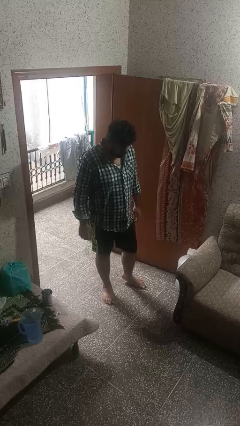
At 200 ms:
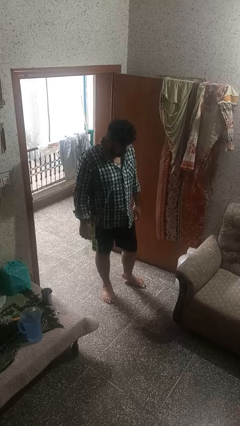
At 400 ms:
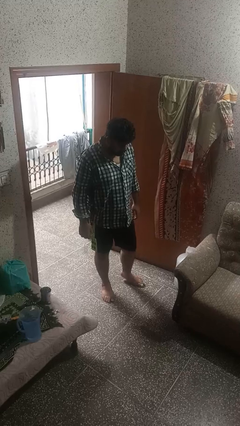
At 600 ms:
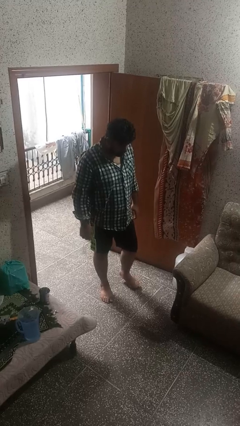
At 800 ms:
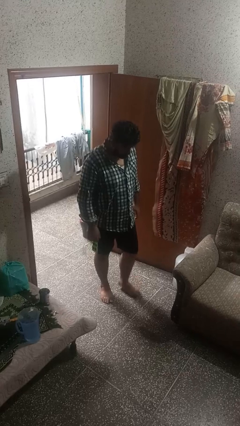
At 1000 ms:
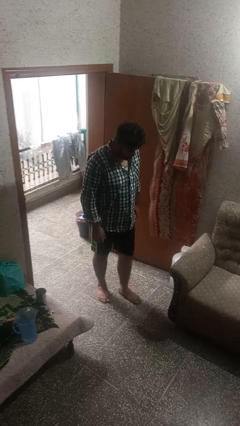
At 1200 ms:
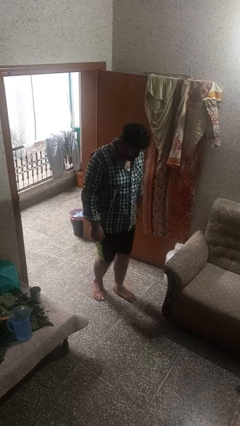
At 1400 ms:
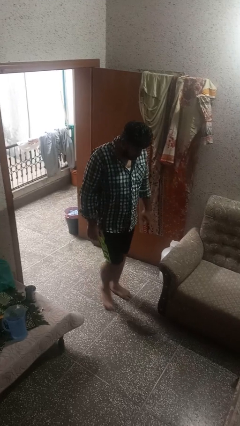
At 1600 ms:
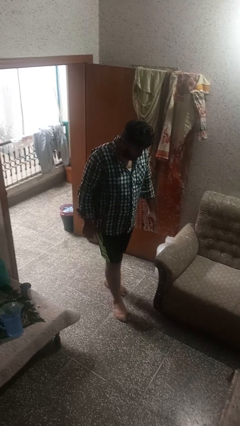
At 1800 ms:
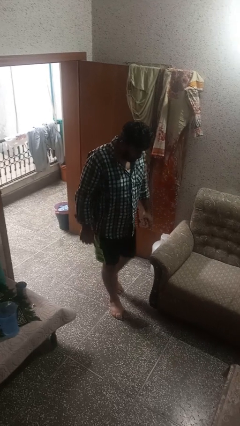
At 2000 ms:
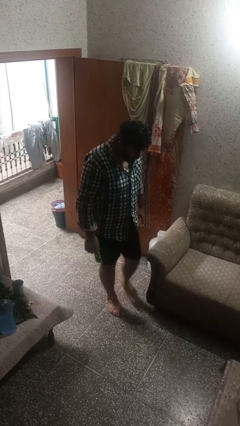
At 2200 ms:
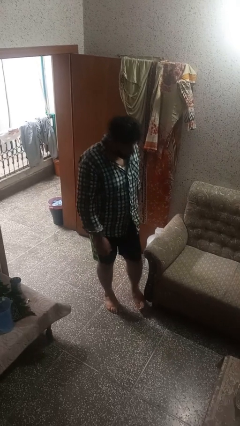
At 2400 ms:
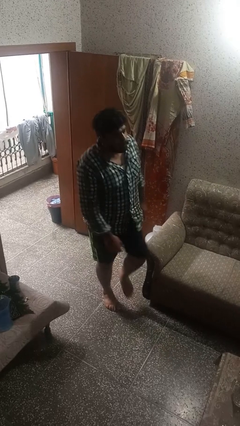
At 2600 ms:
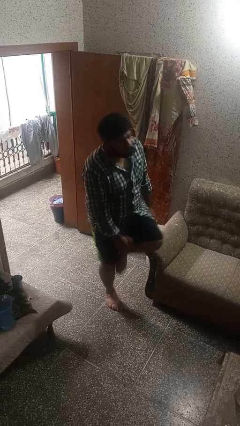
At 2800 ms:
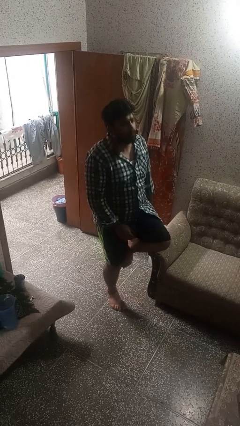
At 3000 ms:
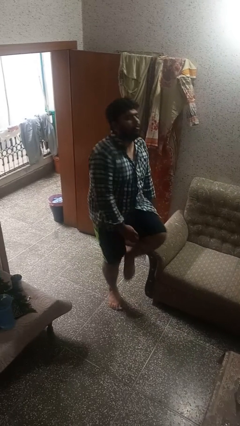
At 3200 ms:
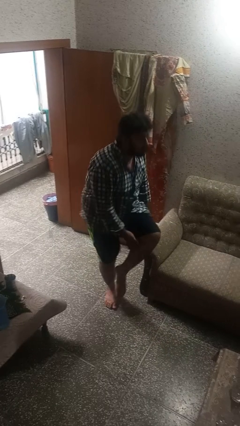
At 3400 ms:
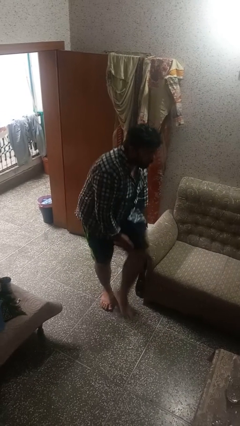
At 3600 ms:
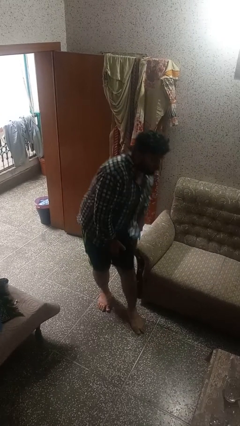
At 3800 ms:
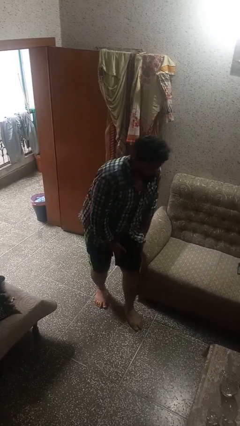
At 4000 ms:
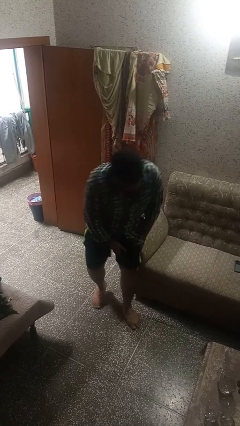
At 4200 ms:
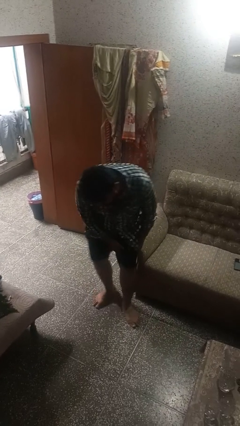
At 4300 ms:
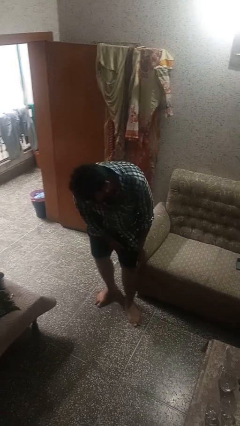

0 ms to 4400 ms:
person stubs toe

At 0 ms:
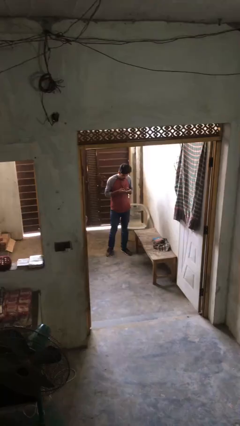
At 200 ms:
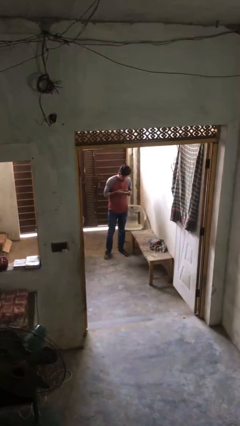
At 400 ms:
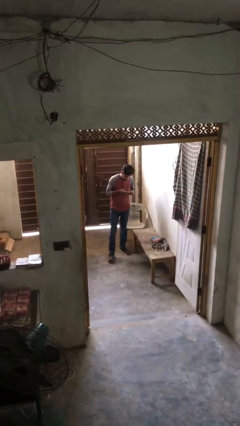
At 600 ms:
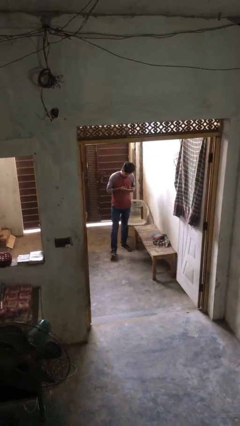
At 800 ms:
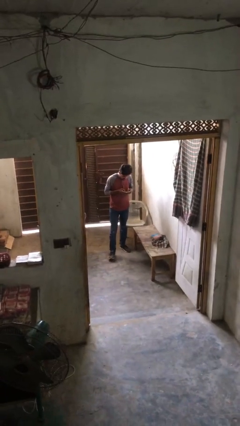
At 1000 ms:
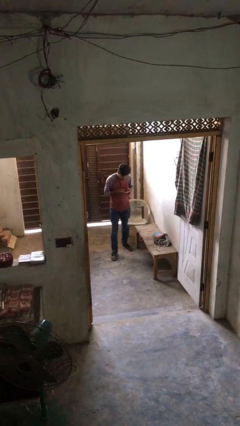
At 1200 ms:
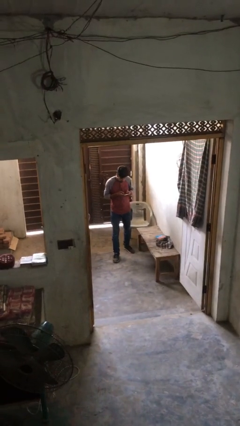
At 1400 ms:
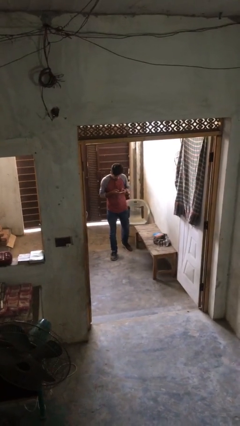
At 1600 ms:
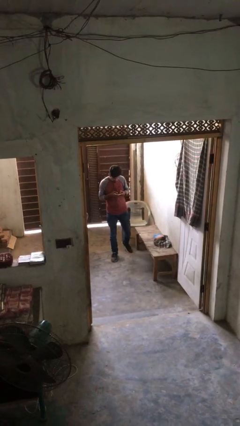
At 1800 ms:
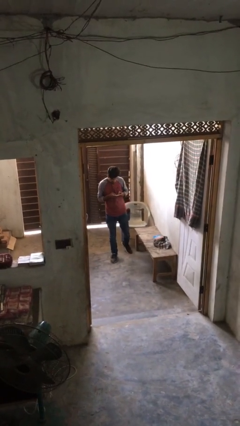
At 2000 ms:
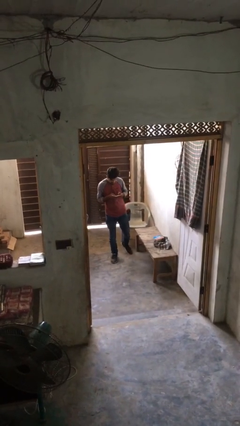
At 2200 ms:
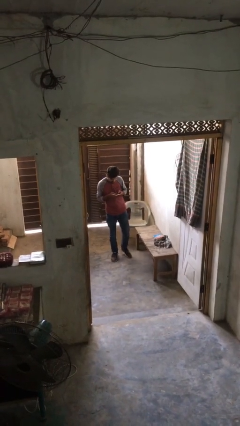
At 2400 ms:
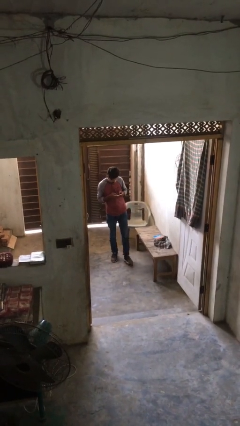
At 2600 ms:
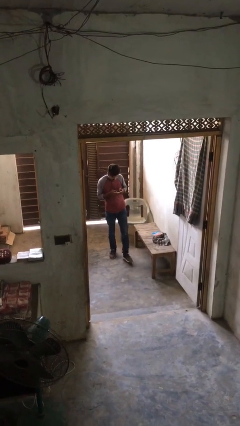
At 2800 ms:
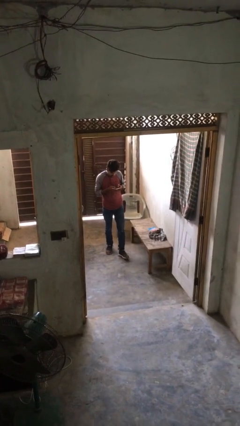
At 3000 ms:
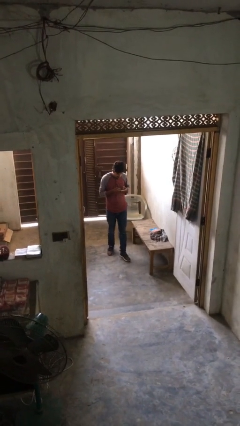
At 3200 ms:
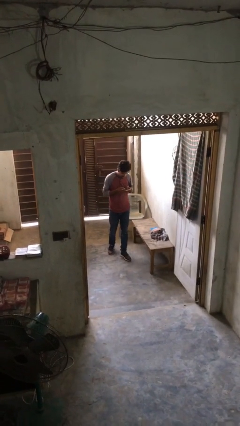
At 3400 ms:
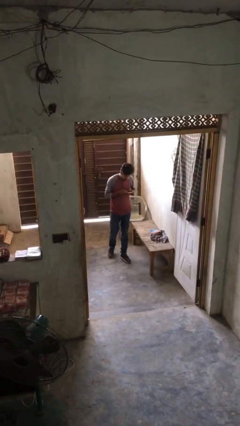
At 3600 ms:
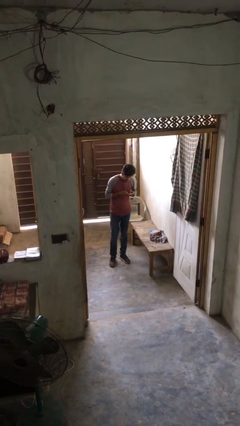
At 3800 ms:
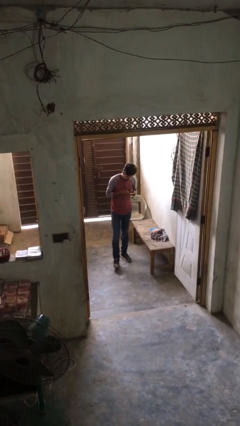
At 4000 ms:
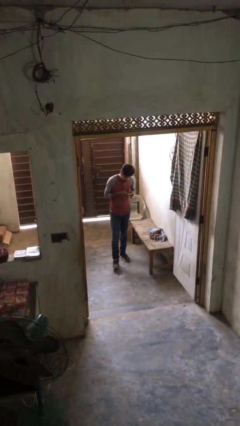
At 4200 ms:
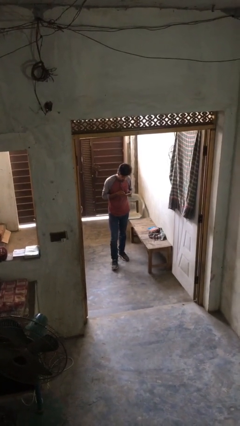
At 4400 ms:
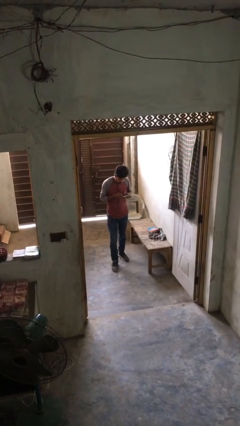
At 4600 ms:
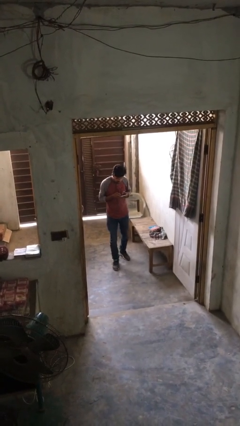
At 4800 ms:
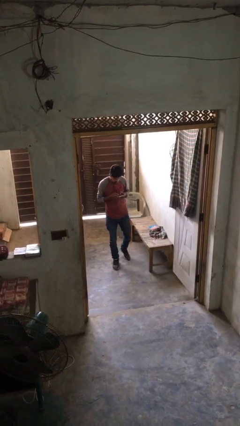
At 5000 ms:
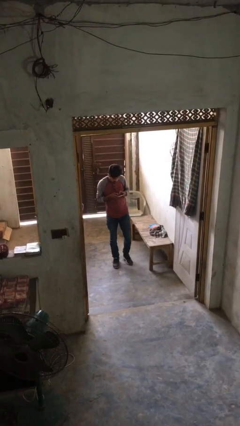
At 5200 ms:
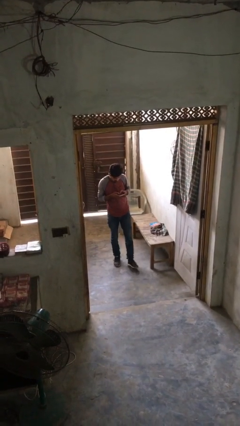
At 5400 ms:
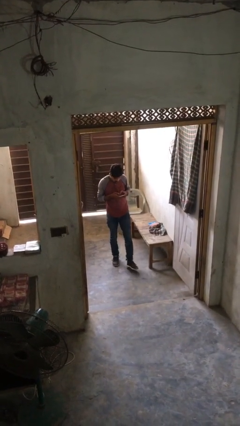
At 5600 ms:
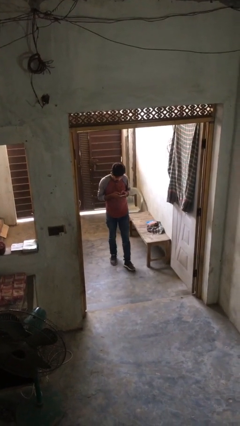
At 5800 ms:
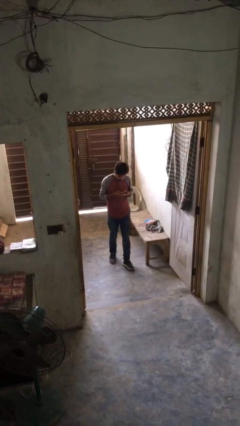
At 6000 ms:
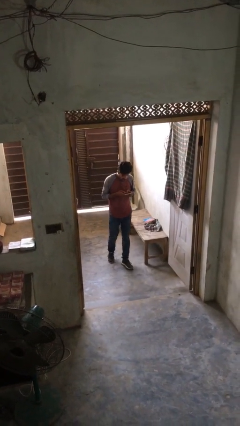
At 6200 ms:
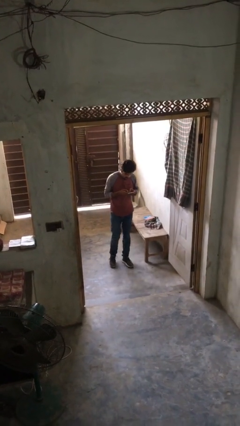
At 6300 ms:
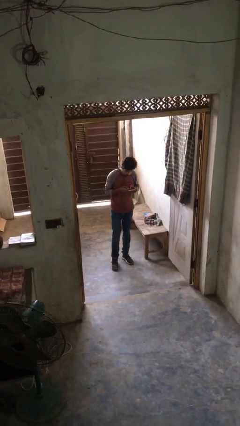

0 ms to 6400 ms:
person texts on phone

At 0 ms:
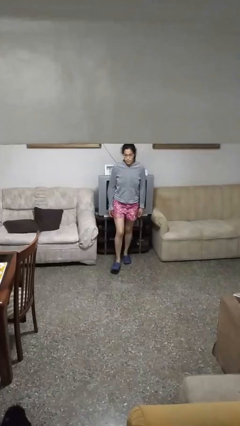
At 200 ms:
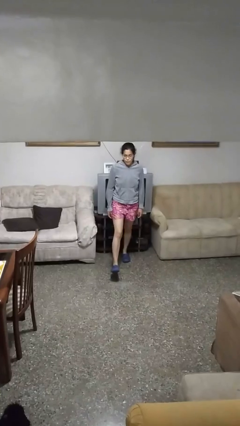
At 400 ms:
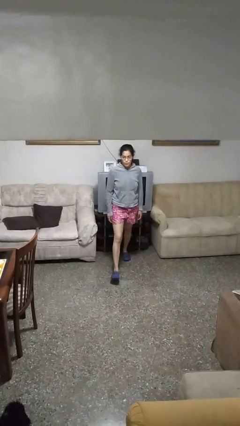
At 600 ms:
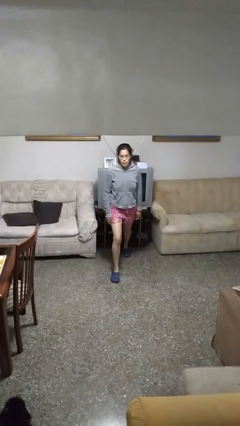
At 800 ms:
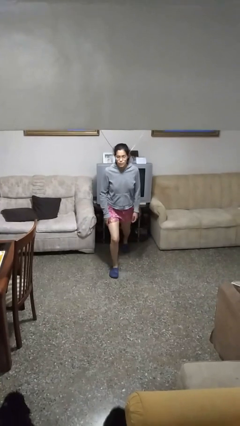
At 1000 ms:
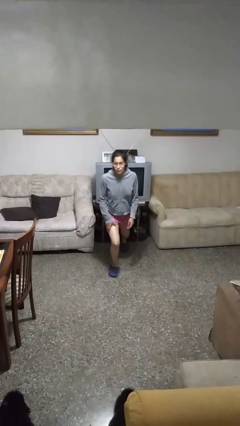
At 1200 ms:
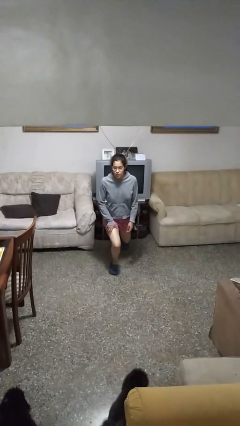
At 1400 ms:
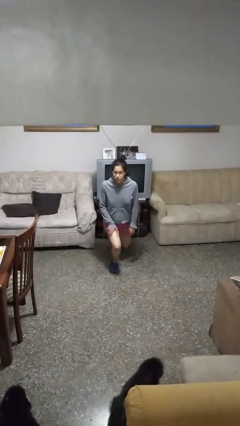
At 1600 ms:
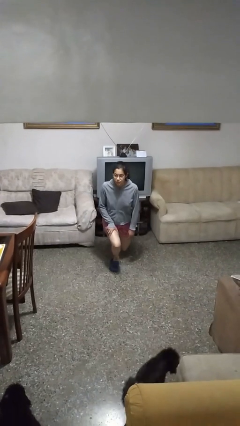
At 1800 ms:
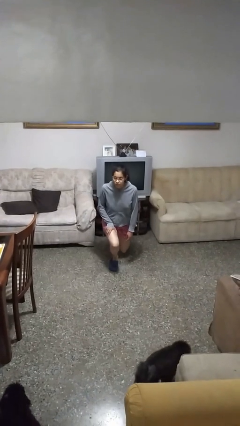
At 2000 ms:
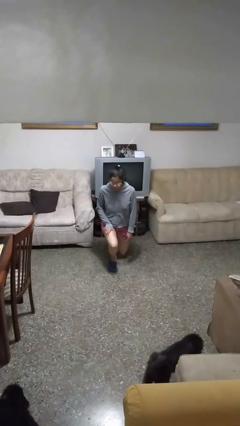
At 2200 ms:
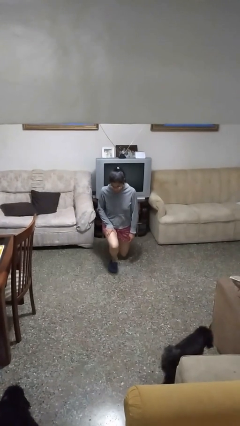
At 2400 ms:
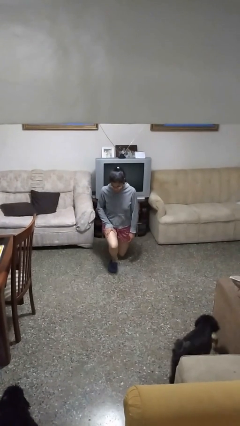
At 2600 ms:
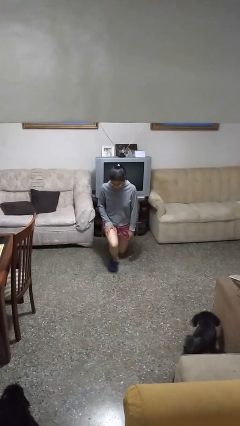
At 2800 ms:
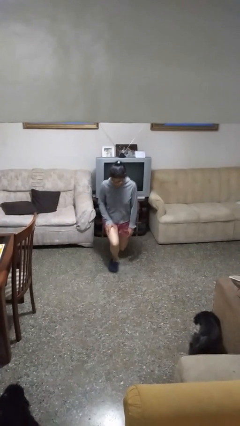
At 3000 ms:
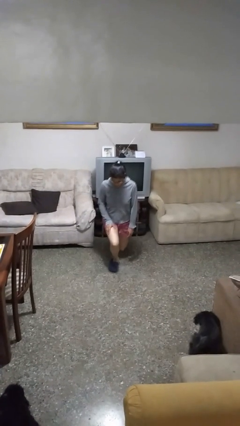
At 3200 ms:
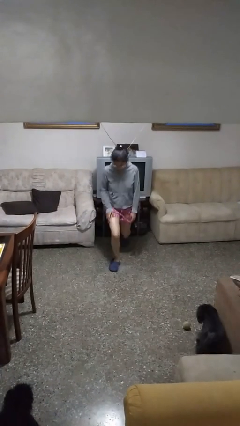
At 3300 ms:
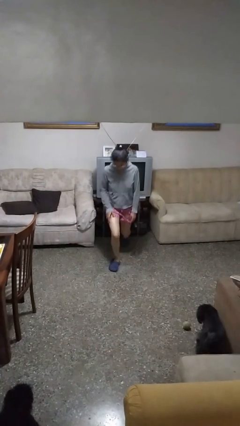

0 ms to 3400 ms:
person exercises with lunges

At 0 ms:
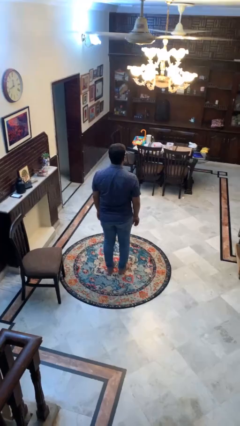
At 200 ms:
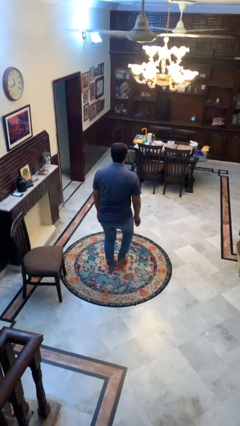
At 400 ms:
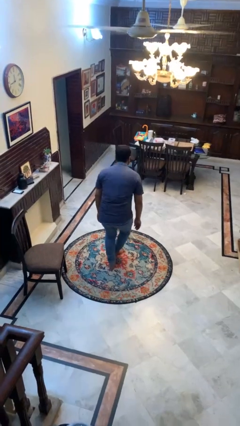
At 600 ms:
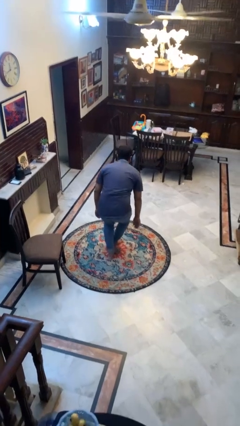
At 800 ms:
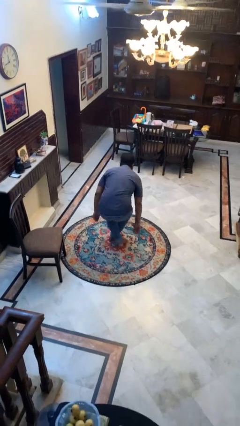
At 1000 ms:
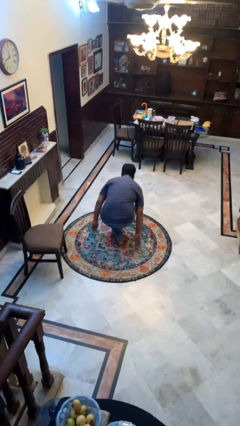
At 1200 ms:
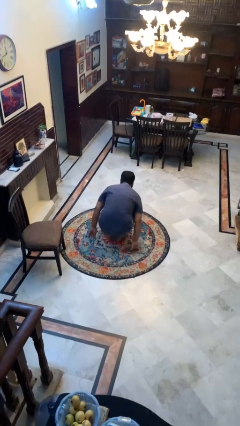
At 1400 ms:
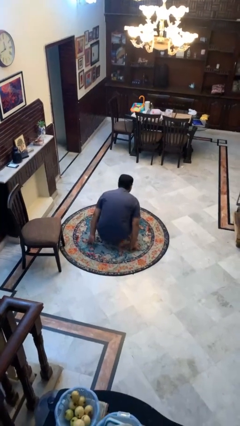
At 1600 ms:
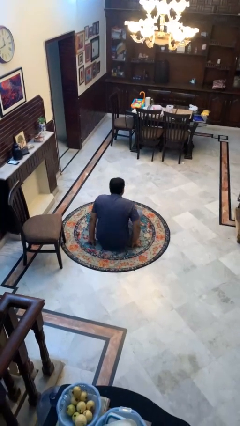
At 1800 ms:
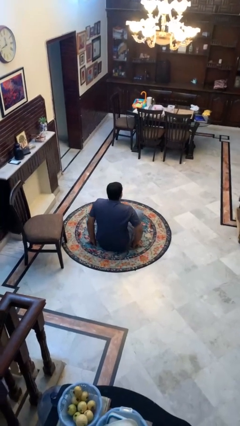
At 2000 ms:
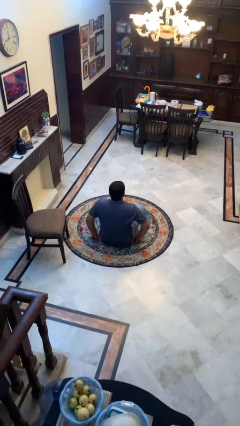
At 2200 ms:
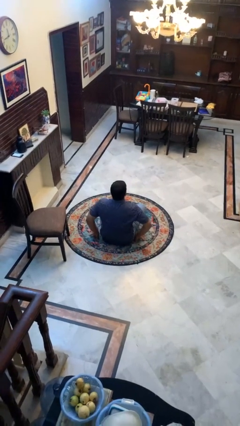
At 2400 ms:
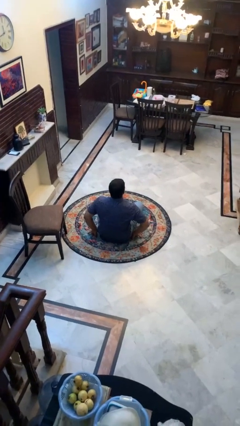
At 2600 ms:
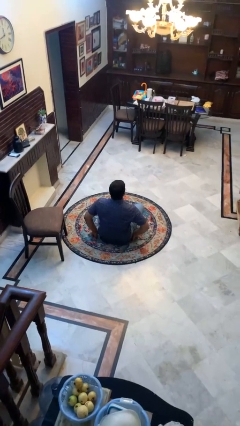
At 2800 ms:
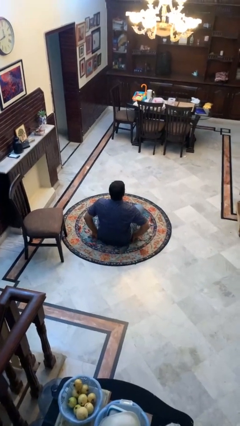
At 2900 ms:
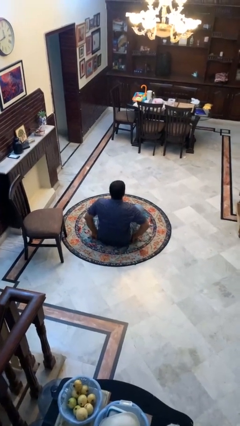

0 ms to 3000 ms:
person sits crisscross

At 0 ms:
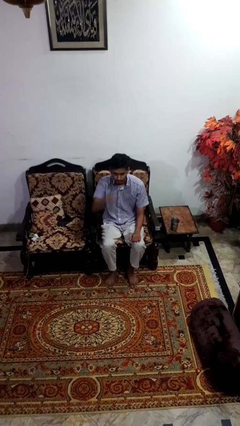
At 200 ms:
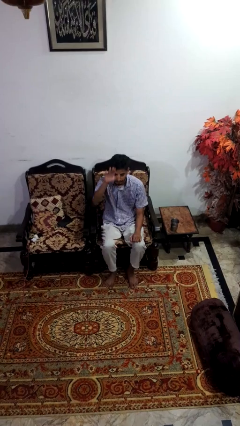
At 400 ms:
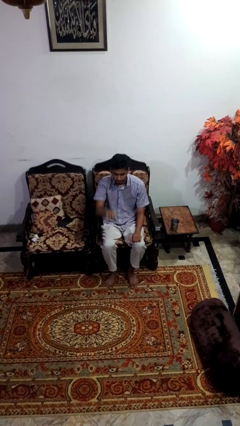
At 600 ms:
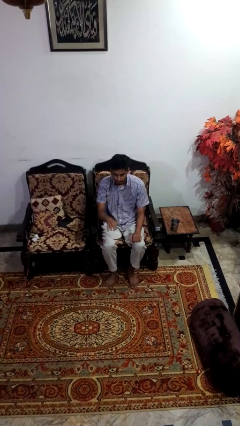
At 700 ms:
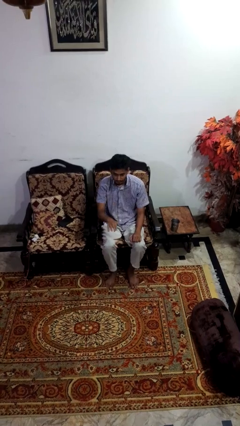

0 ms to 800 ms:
person gestures swipe down
